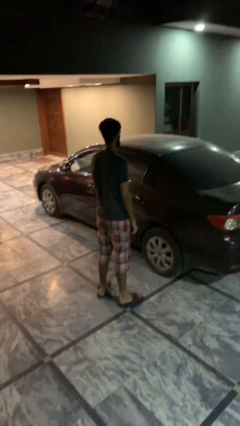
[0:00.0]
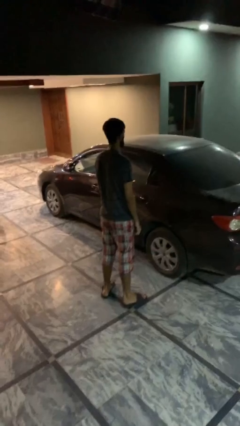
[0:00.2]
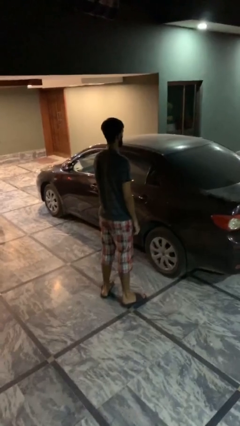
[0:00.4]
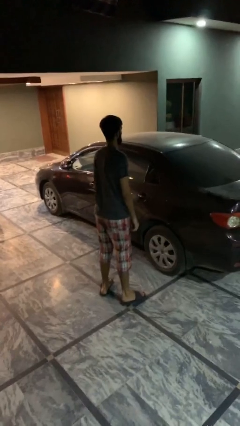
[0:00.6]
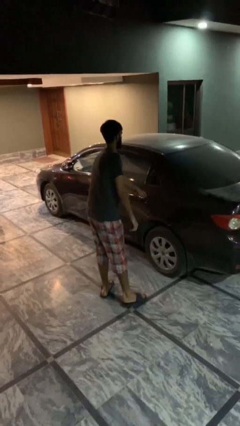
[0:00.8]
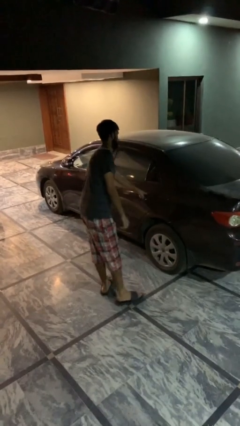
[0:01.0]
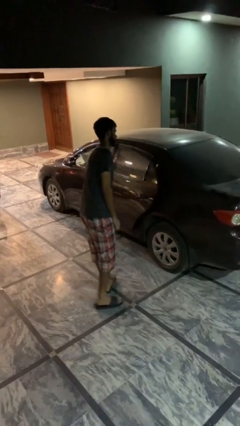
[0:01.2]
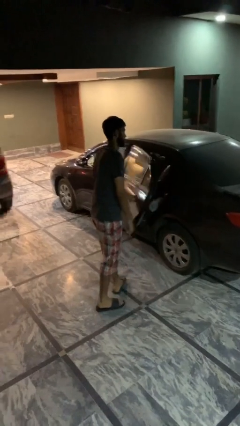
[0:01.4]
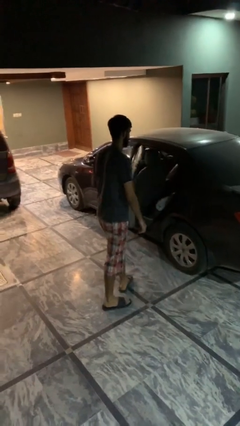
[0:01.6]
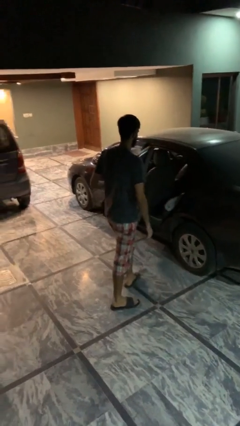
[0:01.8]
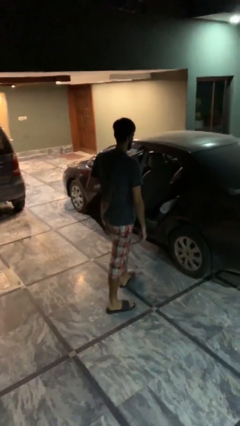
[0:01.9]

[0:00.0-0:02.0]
person opens car door

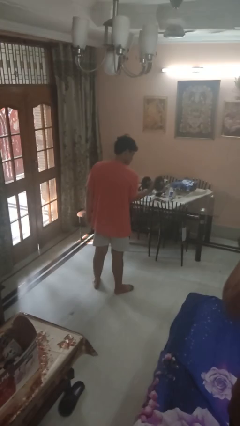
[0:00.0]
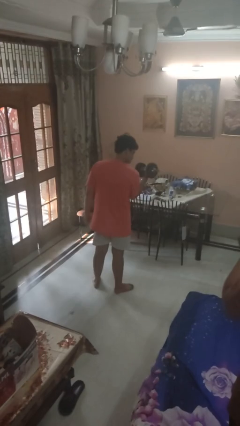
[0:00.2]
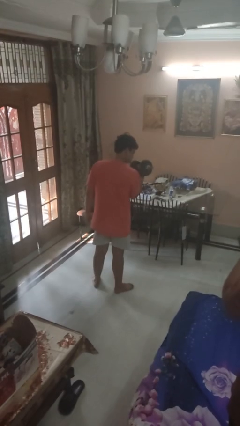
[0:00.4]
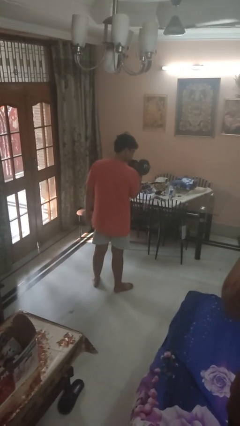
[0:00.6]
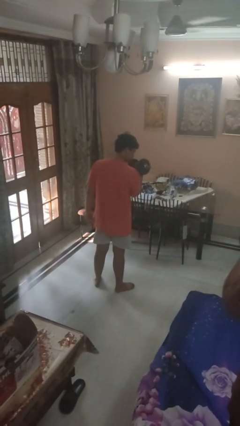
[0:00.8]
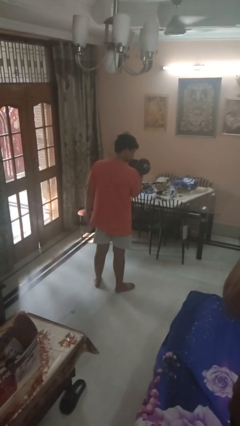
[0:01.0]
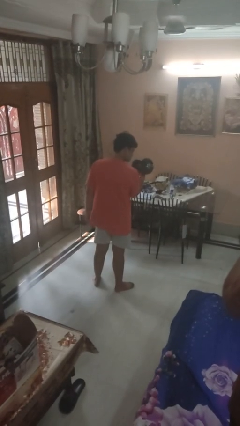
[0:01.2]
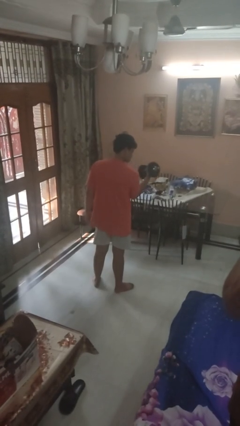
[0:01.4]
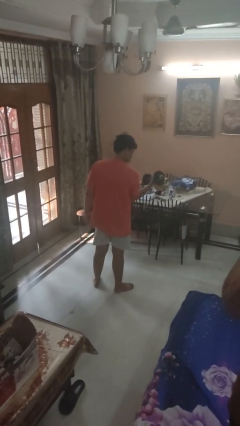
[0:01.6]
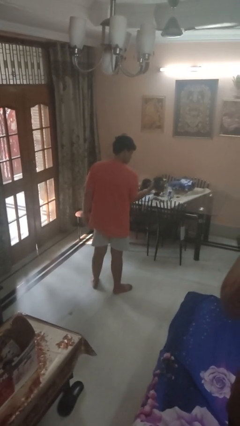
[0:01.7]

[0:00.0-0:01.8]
person lifts dumbbells

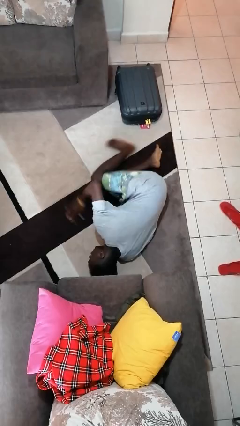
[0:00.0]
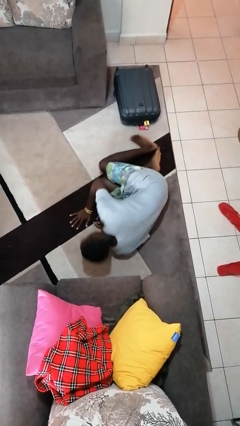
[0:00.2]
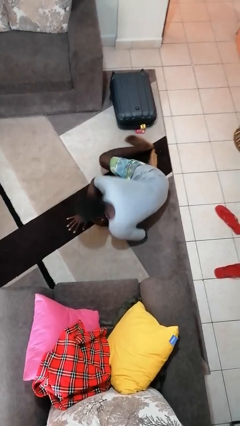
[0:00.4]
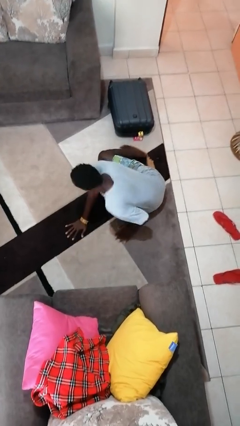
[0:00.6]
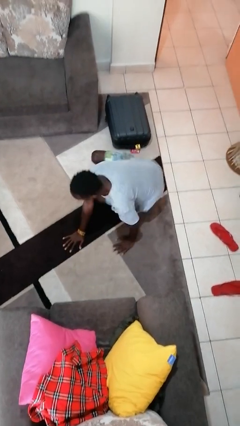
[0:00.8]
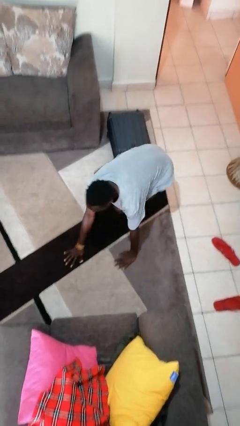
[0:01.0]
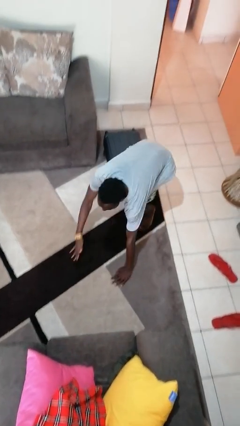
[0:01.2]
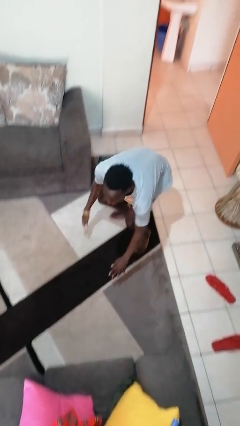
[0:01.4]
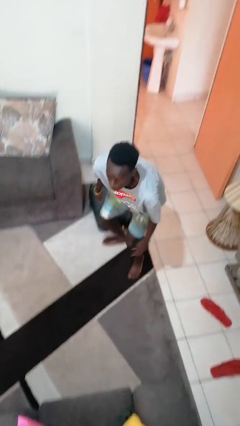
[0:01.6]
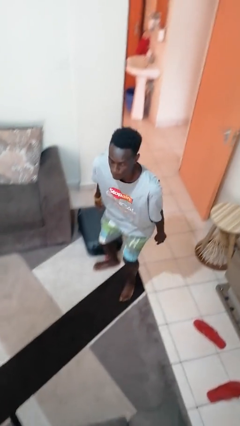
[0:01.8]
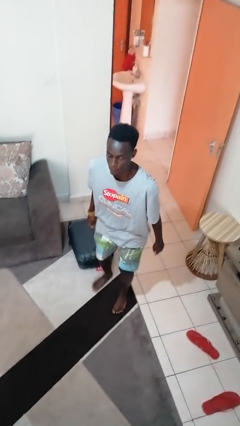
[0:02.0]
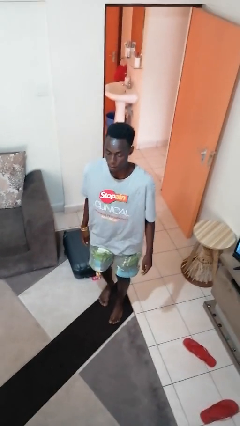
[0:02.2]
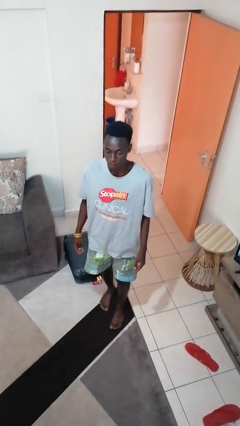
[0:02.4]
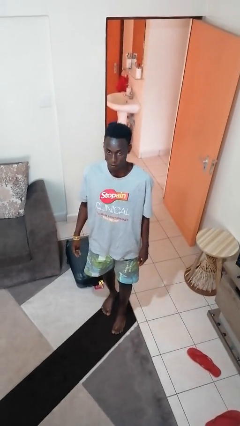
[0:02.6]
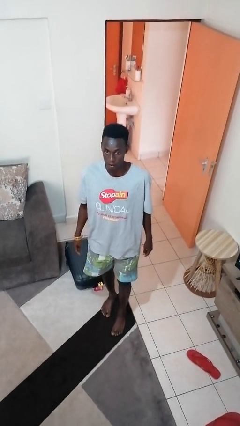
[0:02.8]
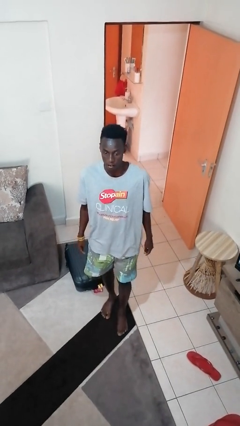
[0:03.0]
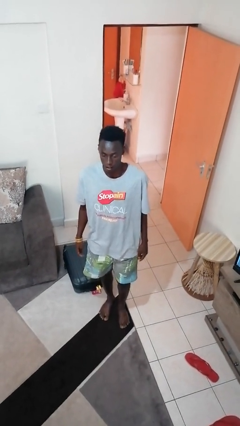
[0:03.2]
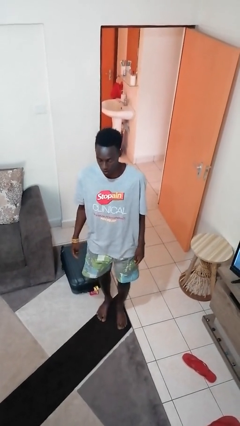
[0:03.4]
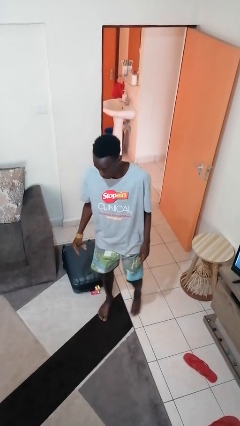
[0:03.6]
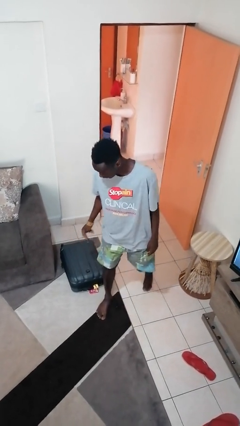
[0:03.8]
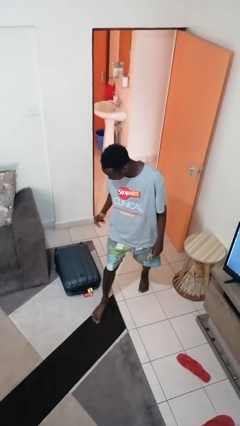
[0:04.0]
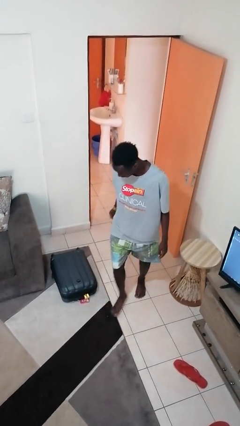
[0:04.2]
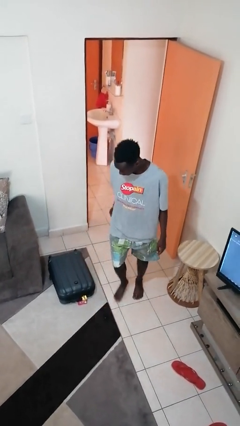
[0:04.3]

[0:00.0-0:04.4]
person stands up from floor

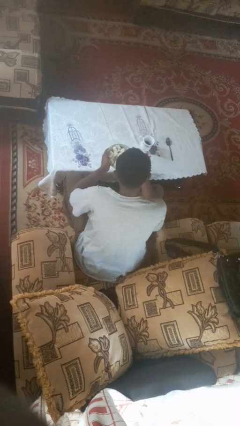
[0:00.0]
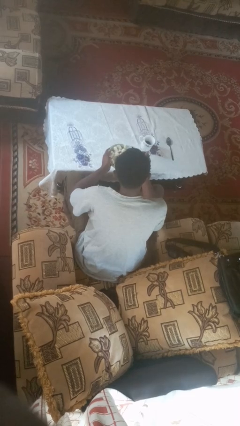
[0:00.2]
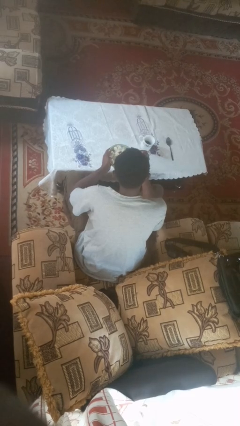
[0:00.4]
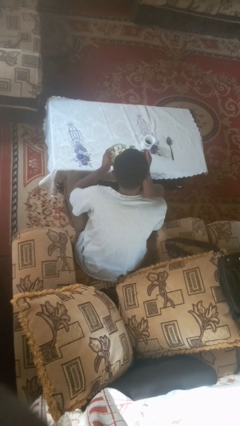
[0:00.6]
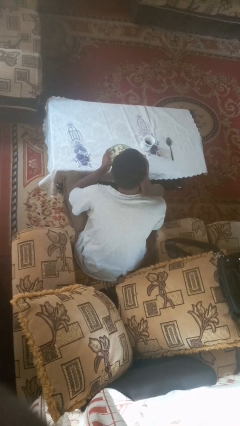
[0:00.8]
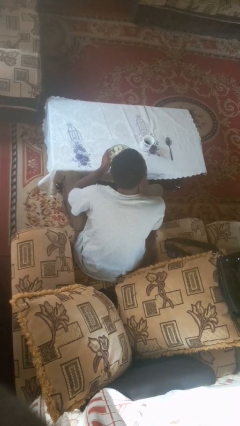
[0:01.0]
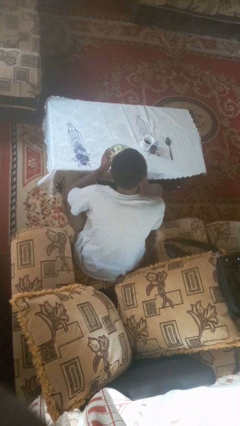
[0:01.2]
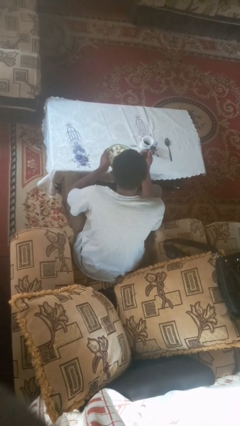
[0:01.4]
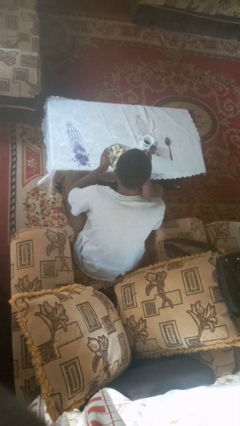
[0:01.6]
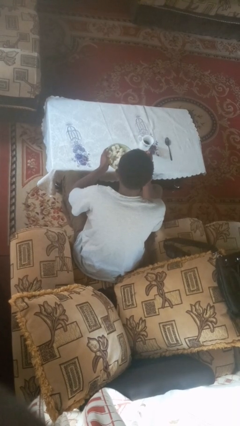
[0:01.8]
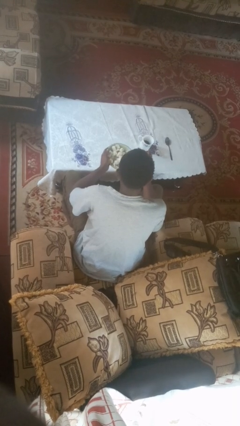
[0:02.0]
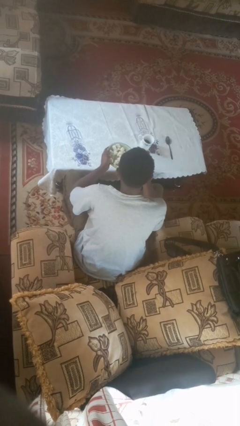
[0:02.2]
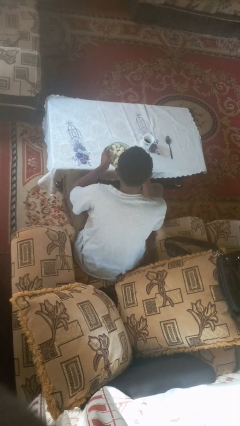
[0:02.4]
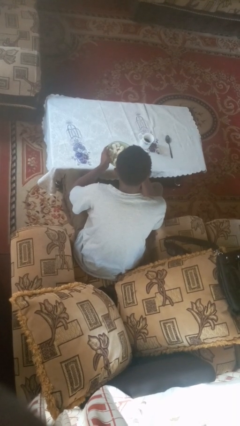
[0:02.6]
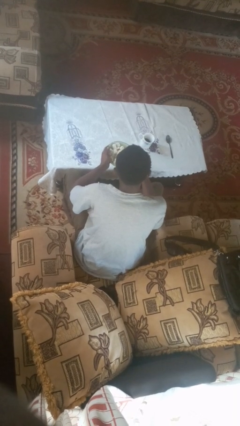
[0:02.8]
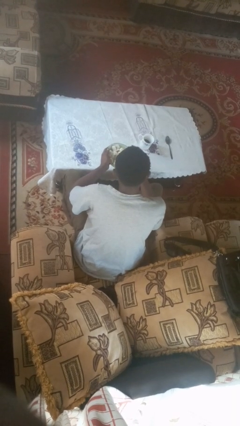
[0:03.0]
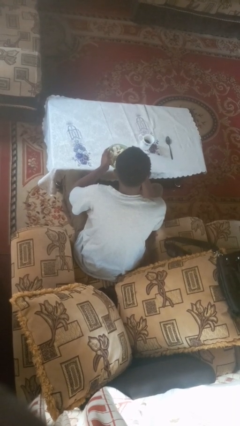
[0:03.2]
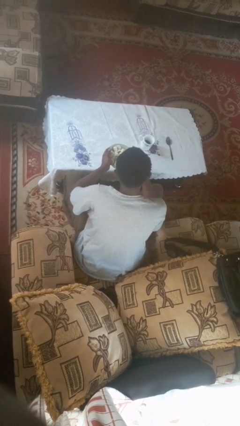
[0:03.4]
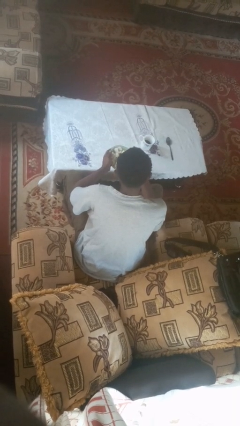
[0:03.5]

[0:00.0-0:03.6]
person eats with utensil

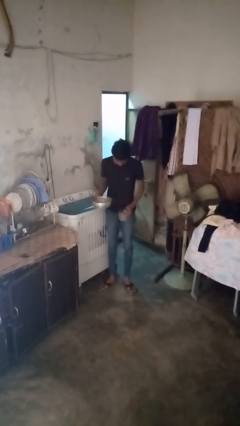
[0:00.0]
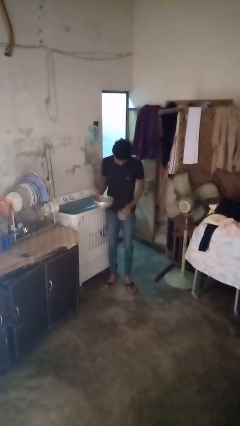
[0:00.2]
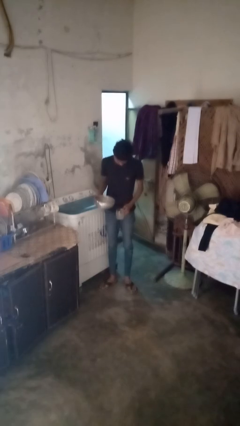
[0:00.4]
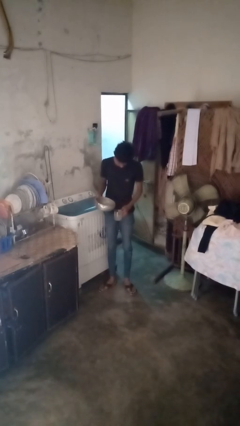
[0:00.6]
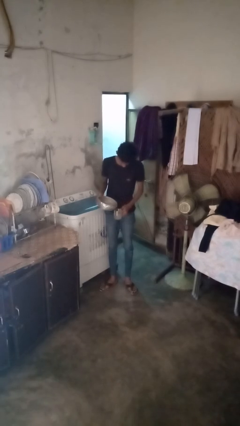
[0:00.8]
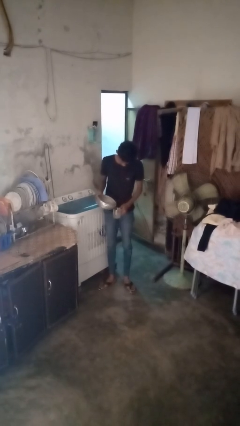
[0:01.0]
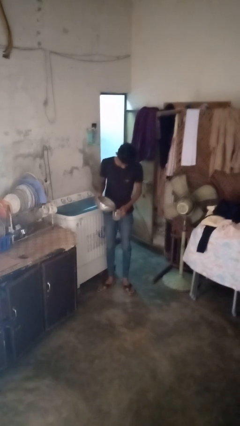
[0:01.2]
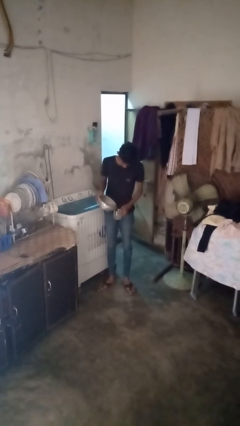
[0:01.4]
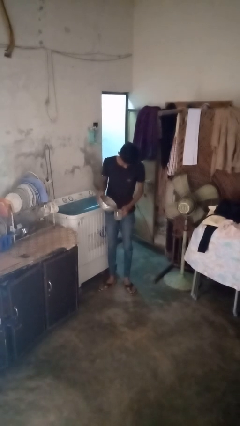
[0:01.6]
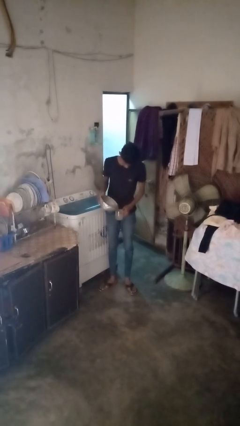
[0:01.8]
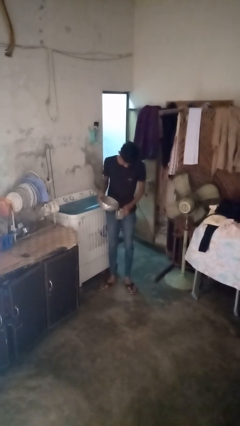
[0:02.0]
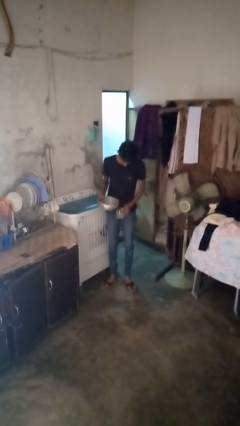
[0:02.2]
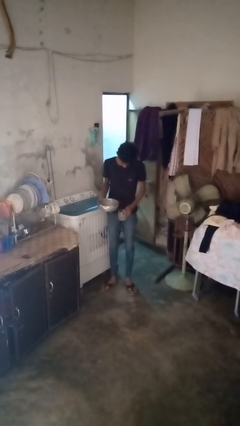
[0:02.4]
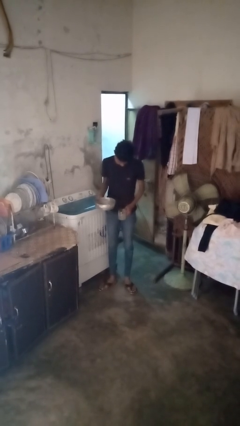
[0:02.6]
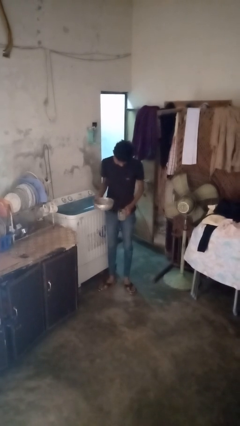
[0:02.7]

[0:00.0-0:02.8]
person pours liquid into cup

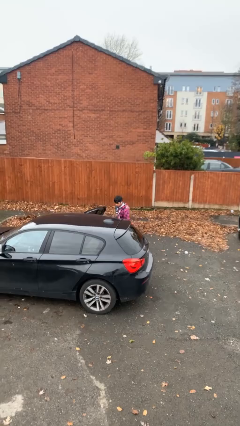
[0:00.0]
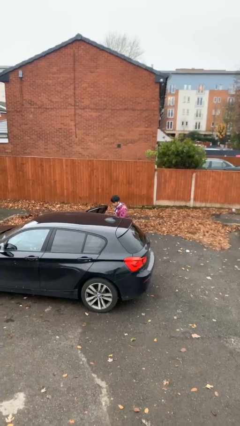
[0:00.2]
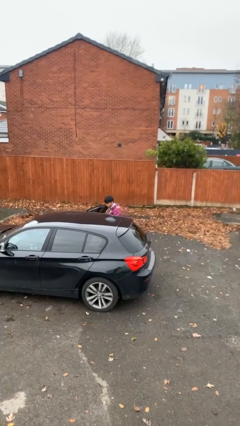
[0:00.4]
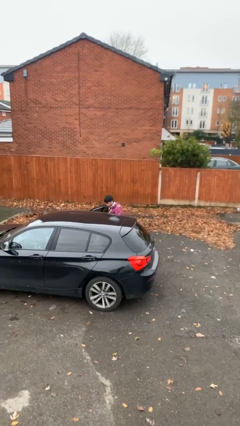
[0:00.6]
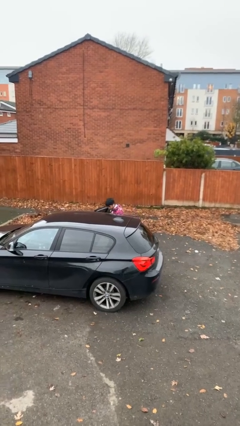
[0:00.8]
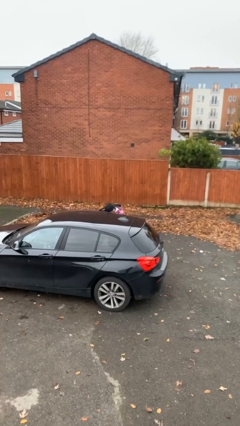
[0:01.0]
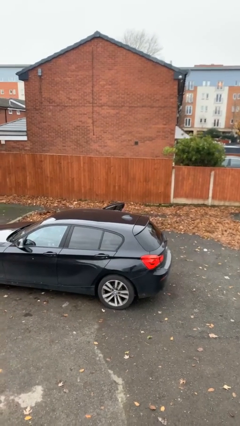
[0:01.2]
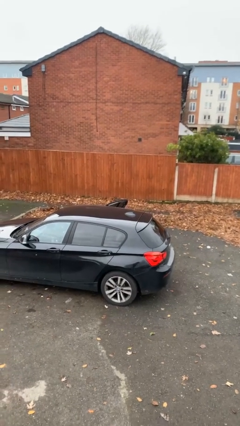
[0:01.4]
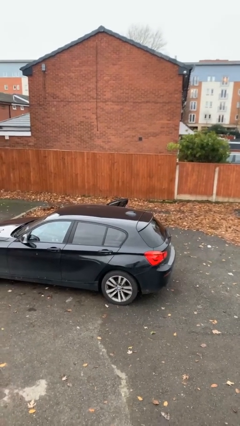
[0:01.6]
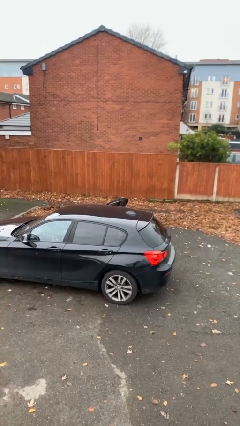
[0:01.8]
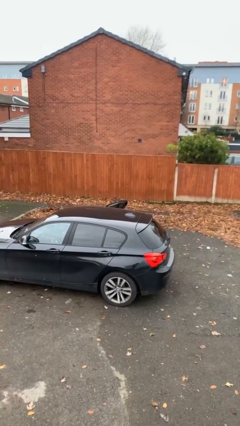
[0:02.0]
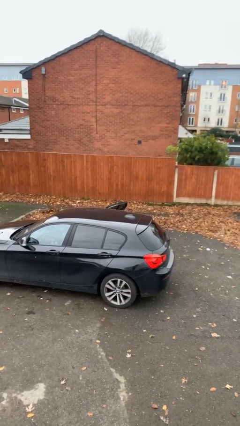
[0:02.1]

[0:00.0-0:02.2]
person enters car

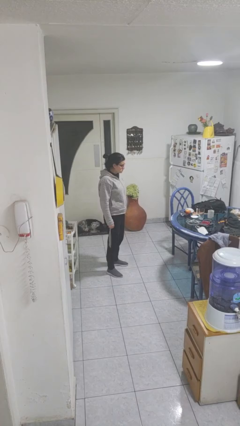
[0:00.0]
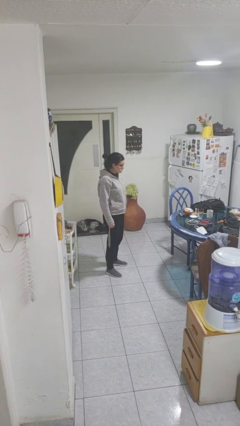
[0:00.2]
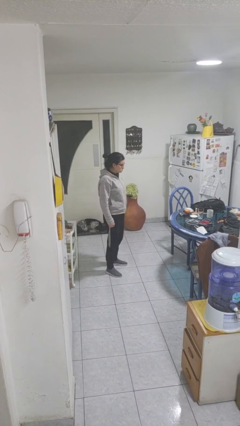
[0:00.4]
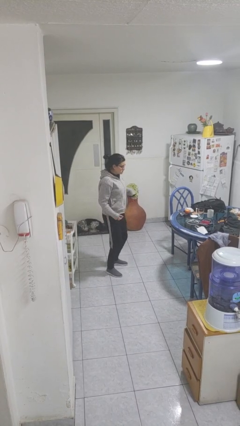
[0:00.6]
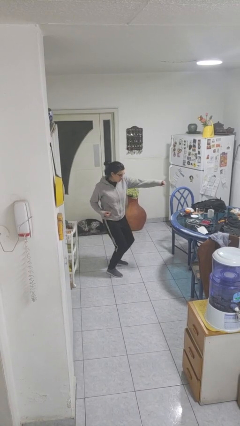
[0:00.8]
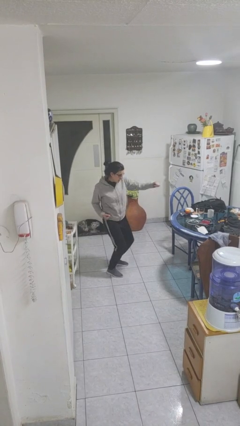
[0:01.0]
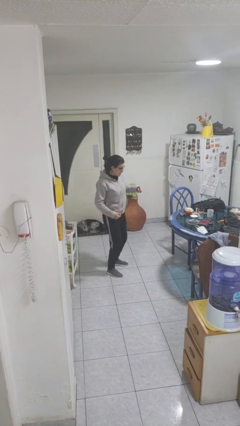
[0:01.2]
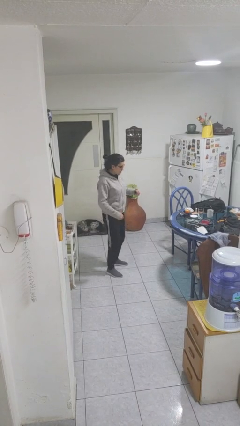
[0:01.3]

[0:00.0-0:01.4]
person punches
